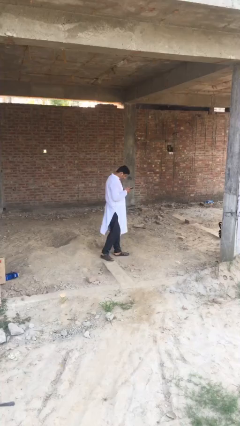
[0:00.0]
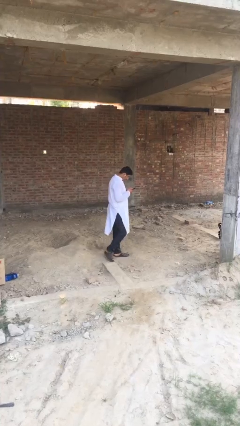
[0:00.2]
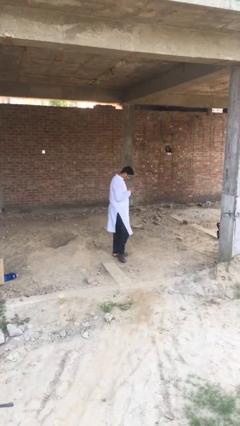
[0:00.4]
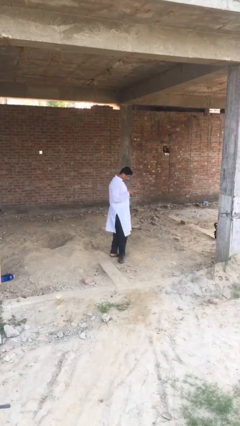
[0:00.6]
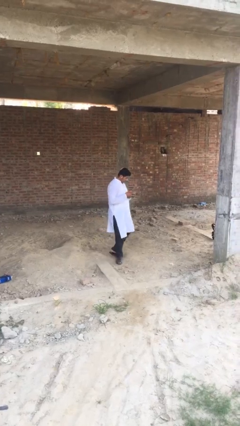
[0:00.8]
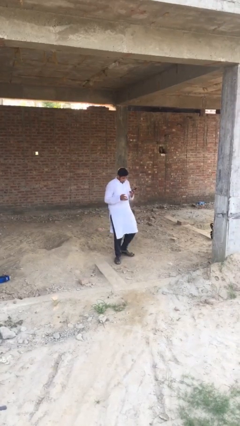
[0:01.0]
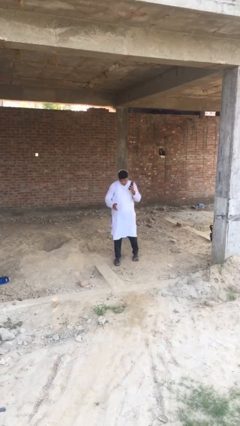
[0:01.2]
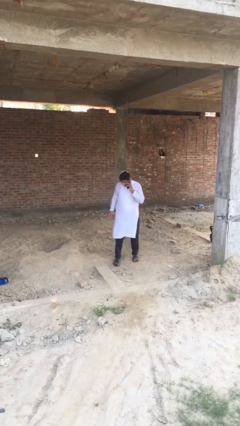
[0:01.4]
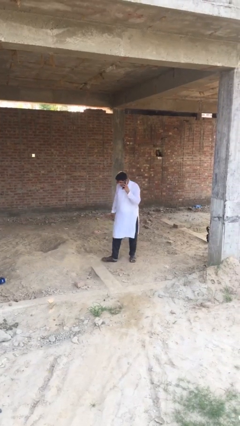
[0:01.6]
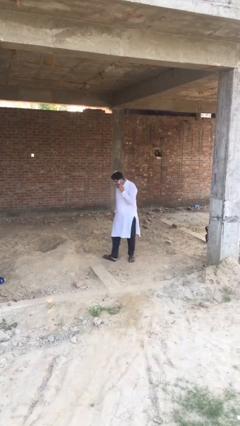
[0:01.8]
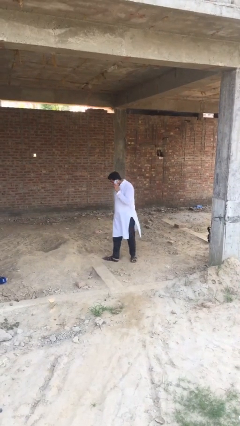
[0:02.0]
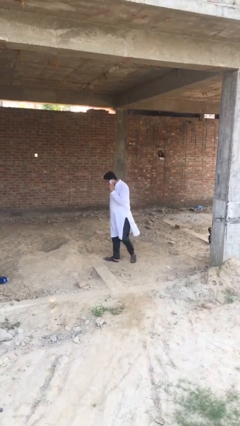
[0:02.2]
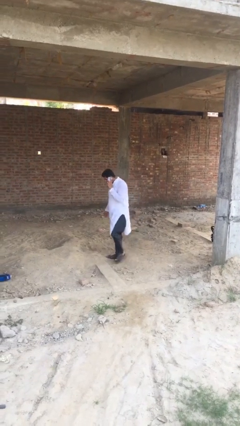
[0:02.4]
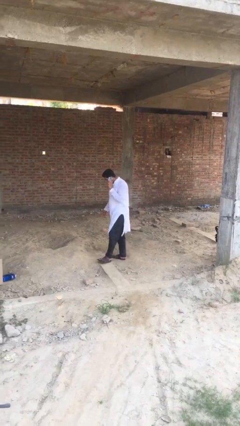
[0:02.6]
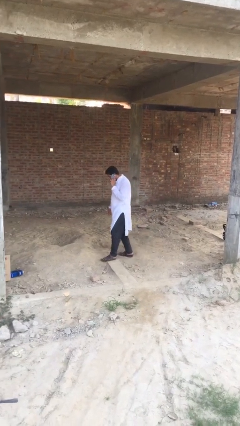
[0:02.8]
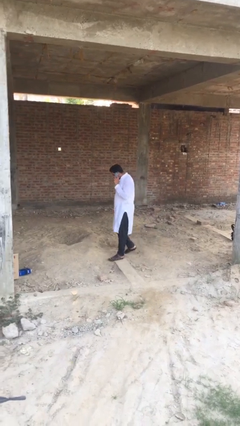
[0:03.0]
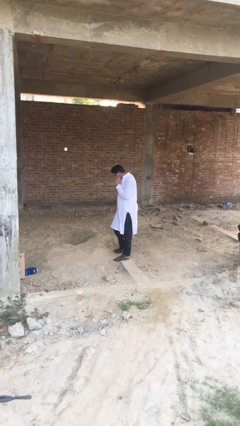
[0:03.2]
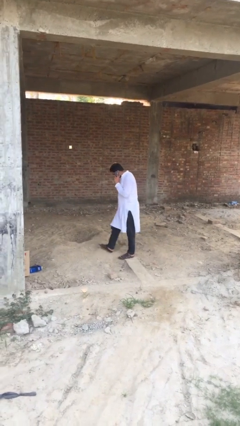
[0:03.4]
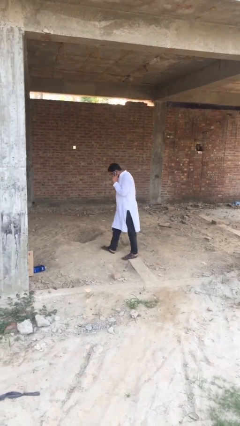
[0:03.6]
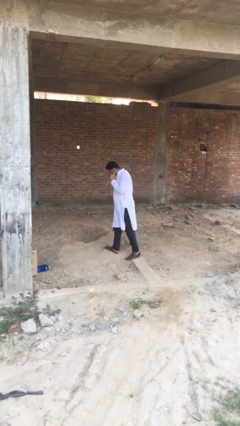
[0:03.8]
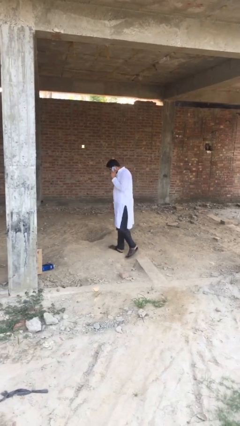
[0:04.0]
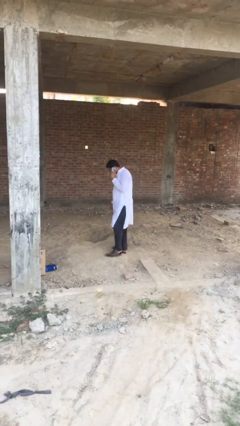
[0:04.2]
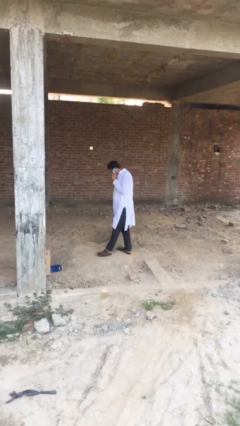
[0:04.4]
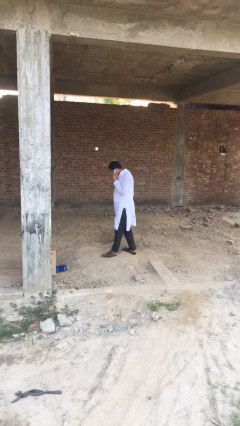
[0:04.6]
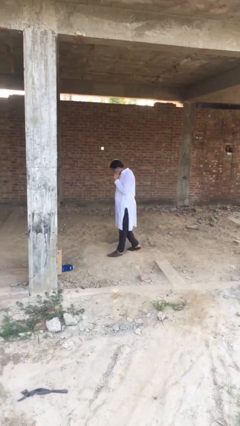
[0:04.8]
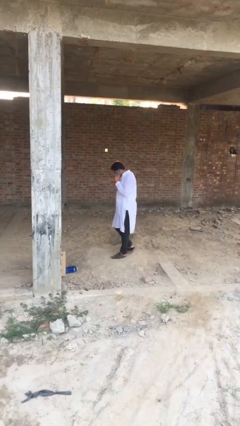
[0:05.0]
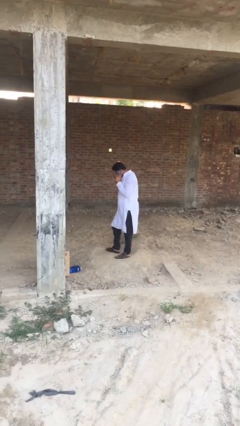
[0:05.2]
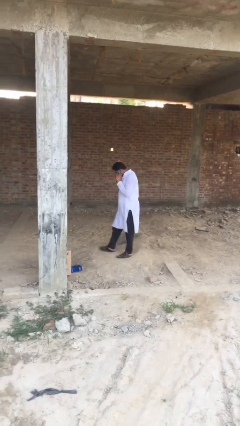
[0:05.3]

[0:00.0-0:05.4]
person talks on phone

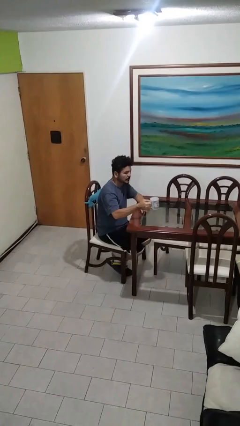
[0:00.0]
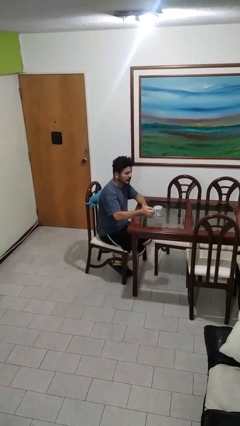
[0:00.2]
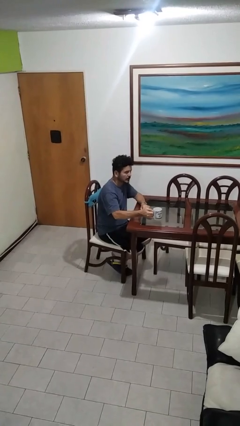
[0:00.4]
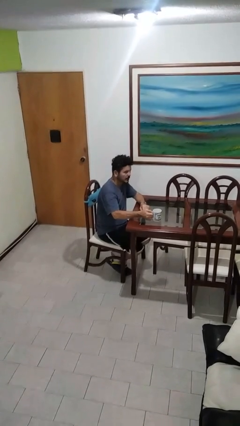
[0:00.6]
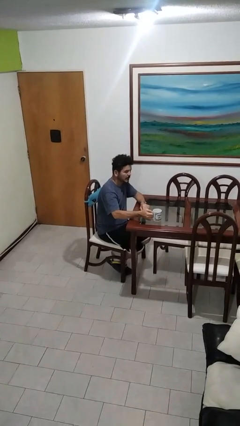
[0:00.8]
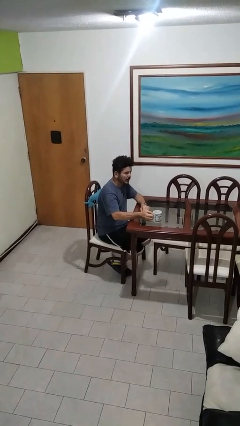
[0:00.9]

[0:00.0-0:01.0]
person puts down object on table

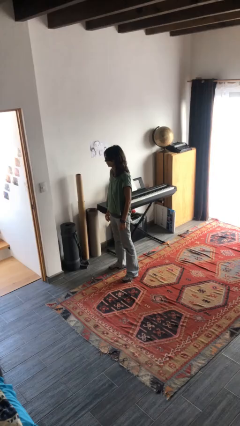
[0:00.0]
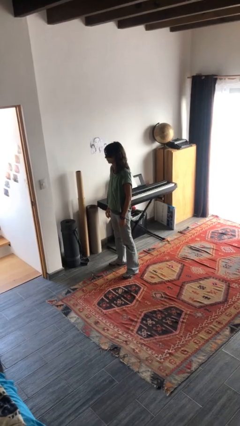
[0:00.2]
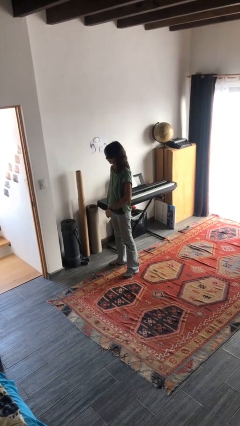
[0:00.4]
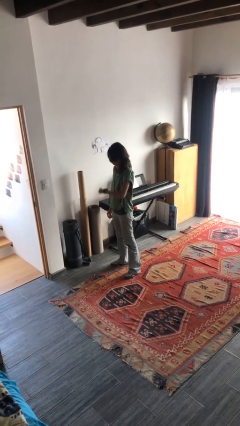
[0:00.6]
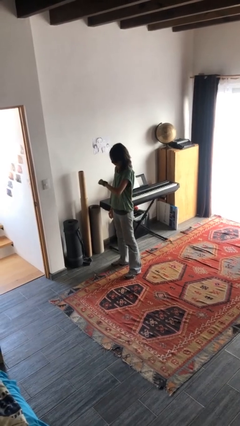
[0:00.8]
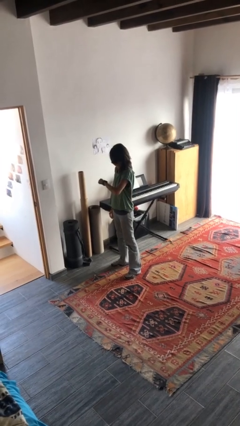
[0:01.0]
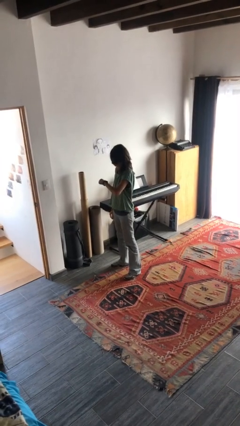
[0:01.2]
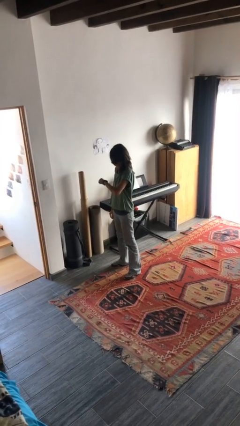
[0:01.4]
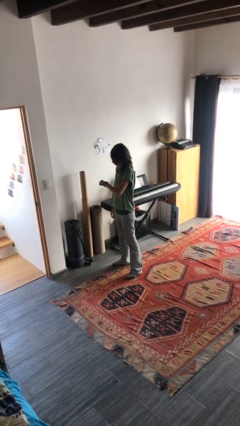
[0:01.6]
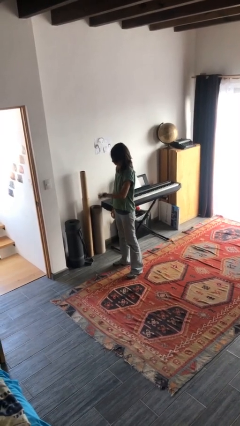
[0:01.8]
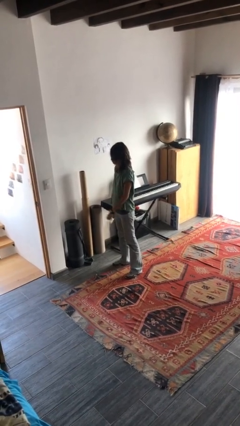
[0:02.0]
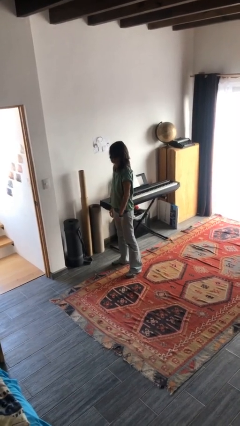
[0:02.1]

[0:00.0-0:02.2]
person looks at wristwatch

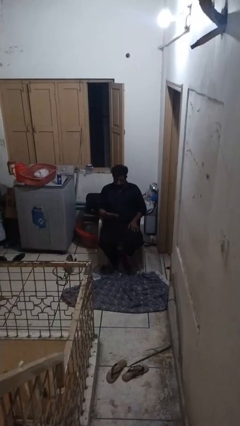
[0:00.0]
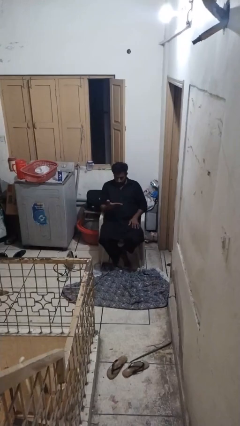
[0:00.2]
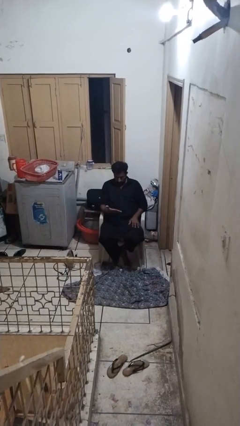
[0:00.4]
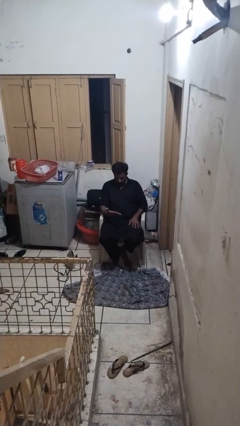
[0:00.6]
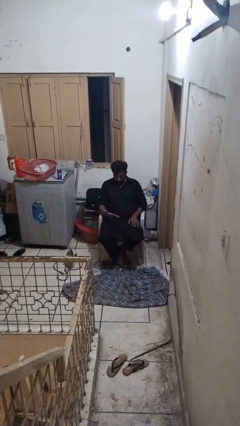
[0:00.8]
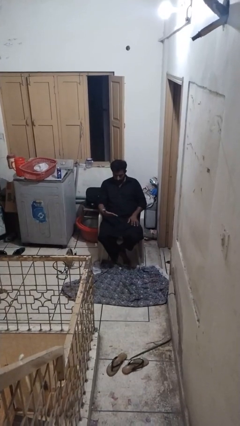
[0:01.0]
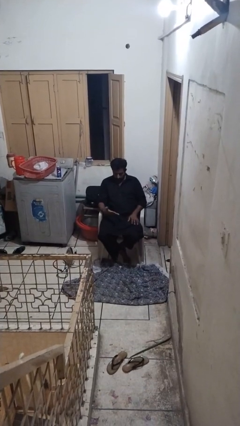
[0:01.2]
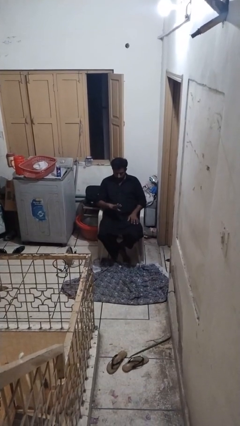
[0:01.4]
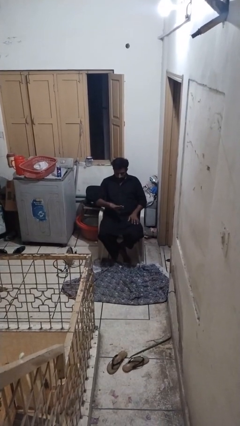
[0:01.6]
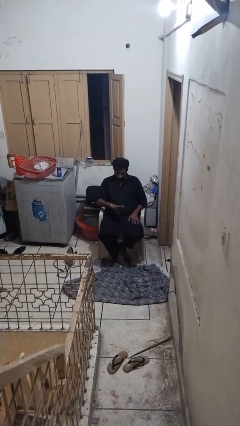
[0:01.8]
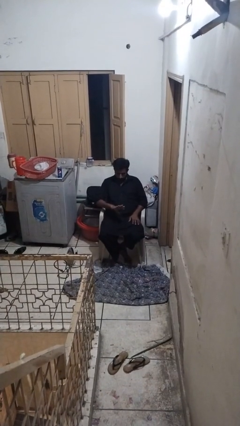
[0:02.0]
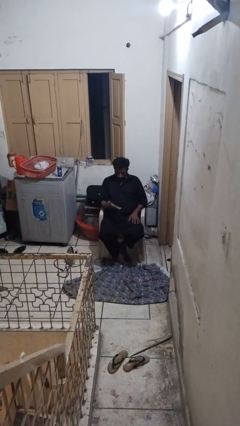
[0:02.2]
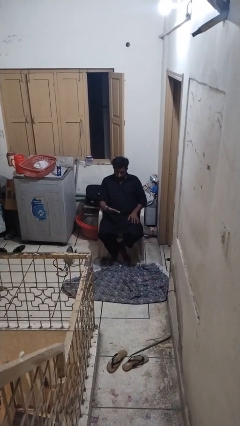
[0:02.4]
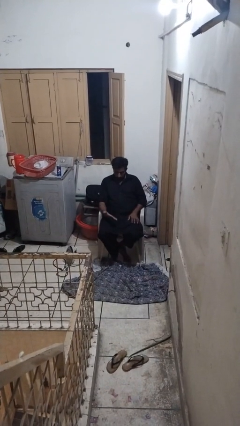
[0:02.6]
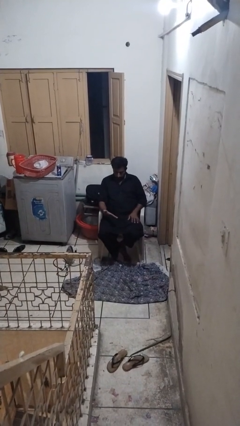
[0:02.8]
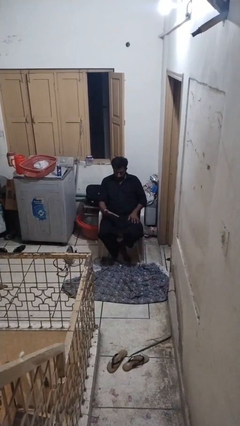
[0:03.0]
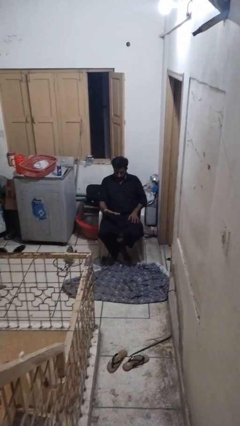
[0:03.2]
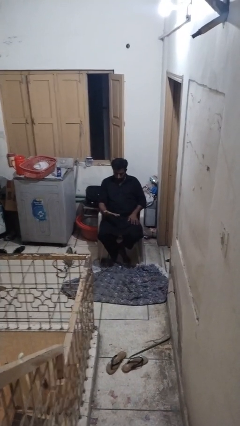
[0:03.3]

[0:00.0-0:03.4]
person looks at hands in lap

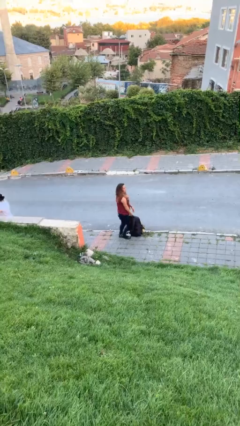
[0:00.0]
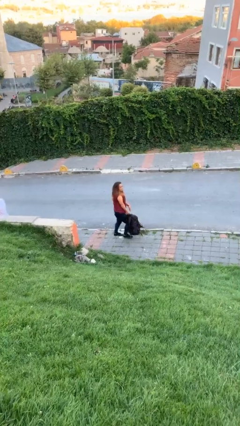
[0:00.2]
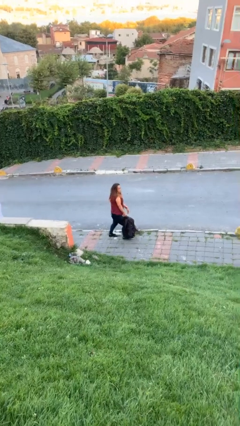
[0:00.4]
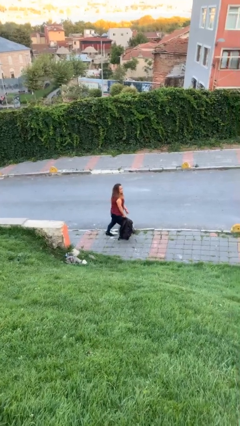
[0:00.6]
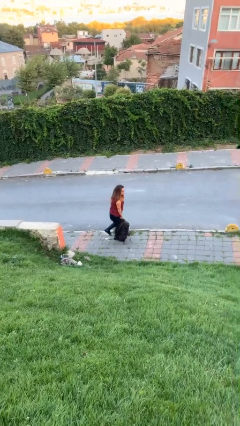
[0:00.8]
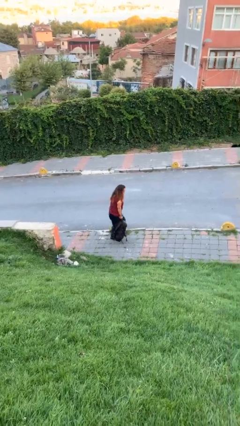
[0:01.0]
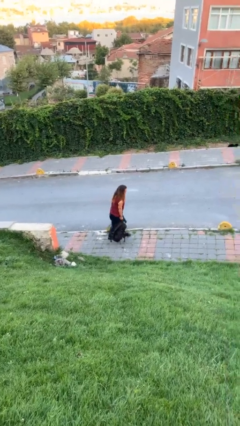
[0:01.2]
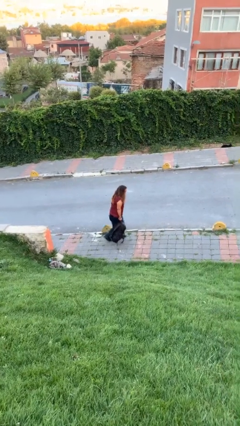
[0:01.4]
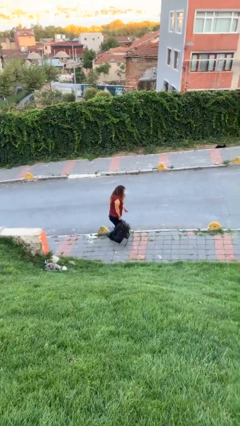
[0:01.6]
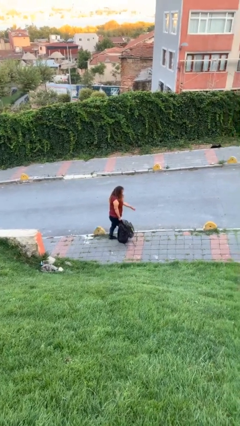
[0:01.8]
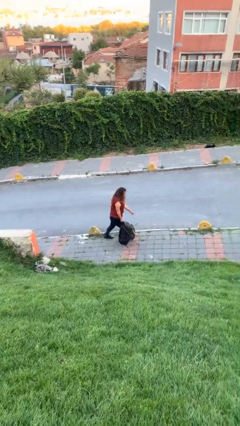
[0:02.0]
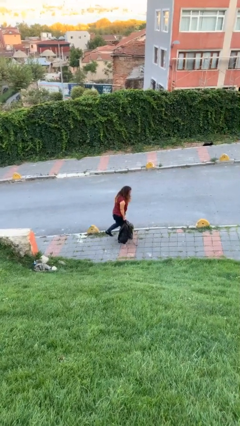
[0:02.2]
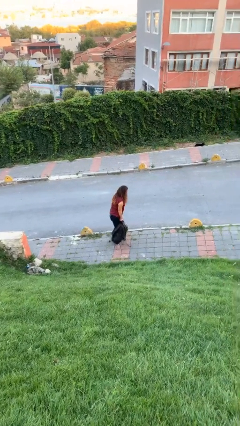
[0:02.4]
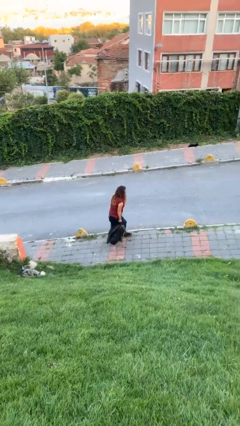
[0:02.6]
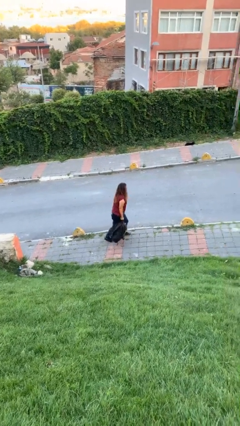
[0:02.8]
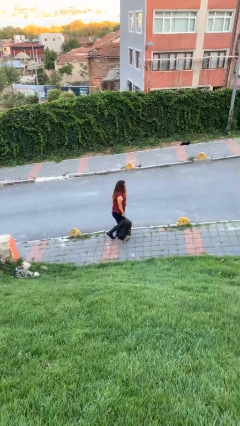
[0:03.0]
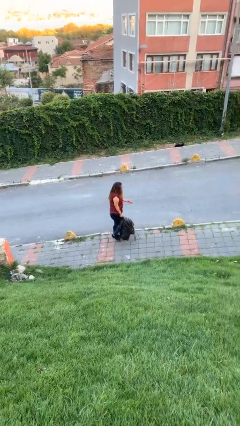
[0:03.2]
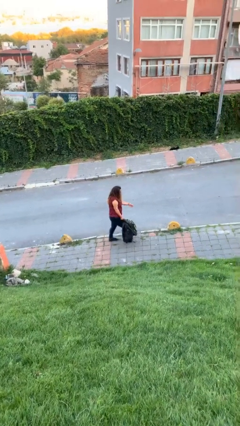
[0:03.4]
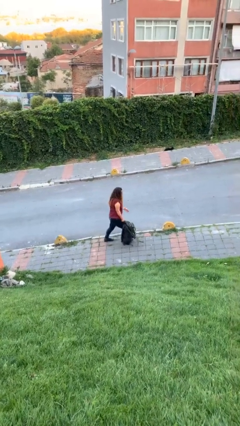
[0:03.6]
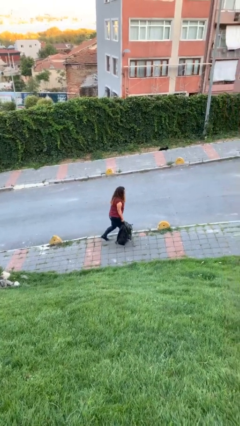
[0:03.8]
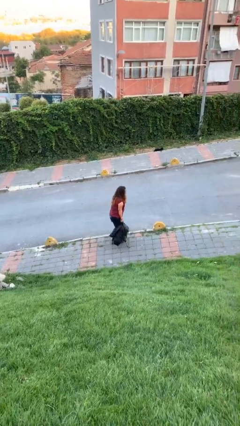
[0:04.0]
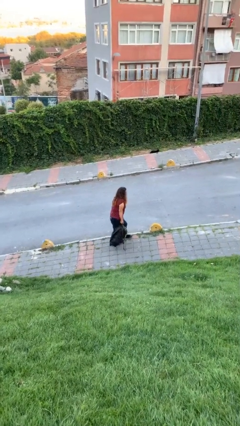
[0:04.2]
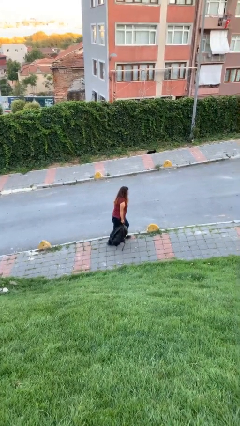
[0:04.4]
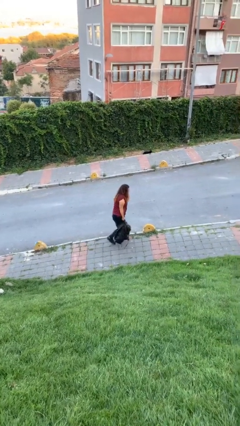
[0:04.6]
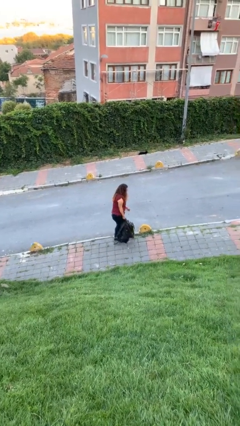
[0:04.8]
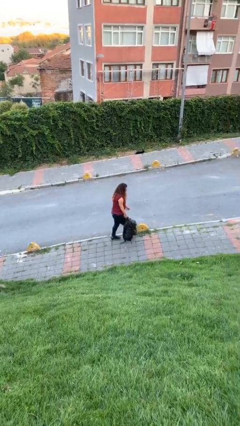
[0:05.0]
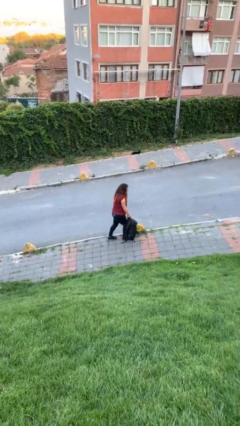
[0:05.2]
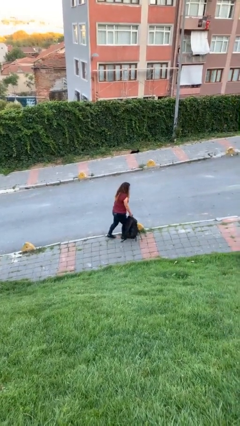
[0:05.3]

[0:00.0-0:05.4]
person carries heavy object
